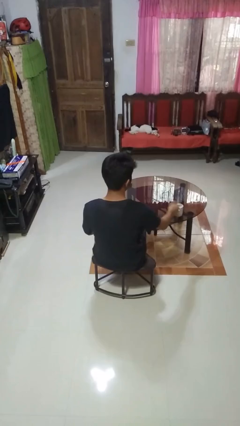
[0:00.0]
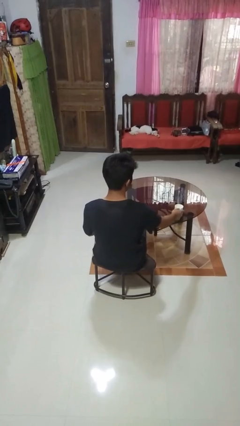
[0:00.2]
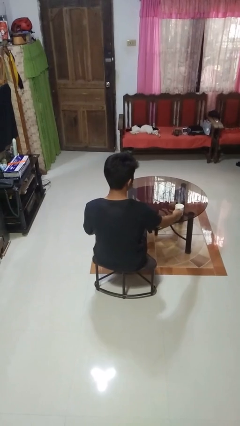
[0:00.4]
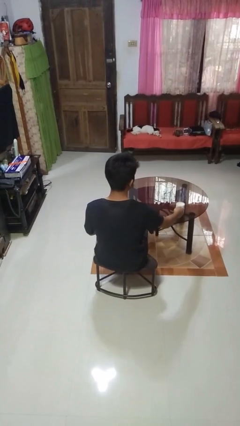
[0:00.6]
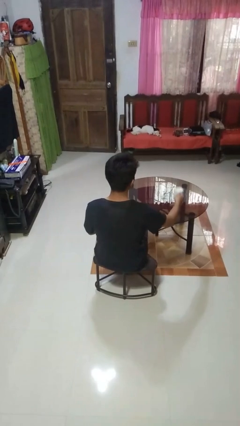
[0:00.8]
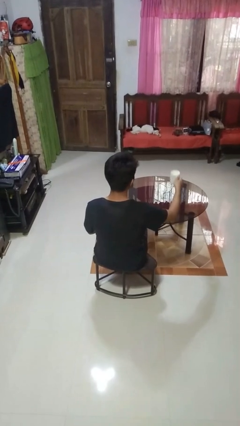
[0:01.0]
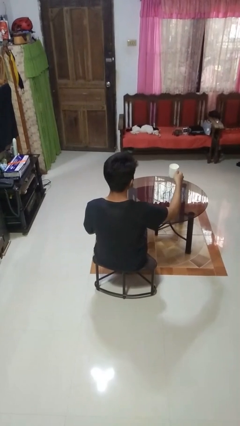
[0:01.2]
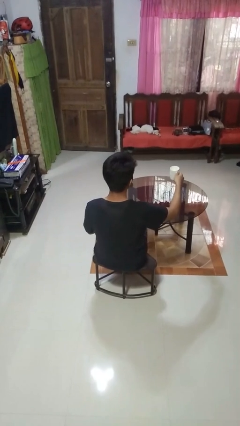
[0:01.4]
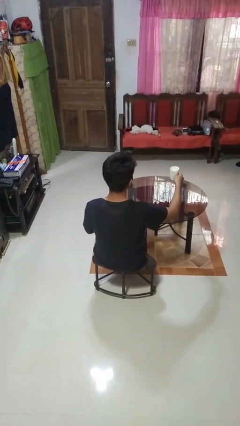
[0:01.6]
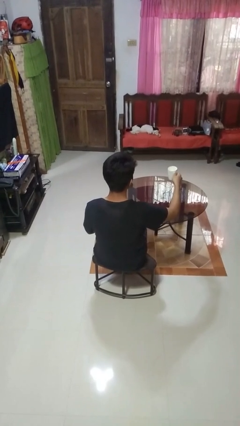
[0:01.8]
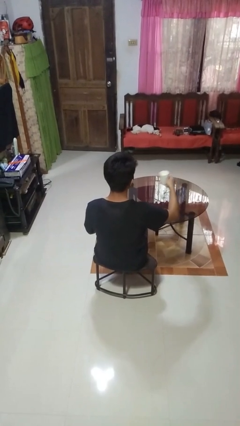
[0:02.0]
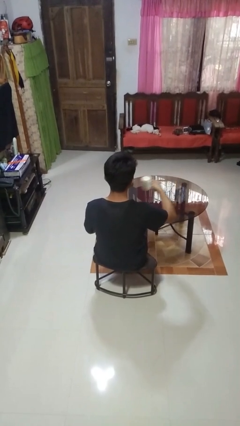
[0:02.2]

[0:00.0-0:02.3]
person picks up object from table

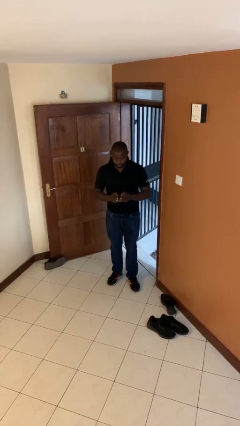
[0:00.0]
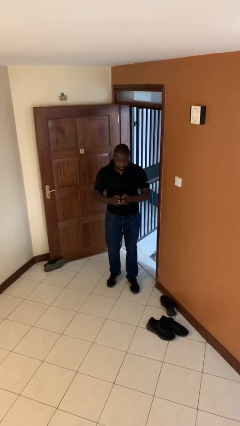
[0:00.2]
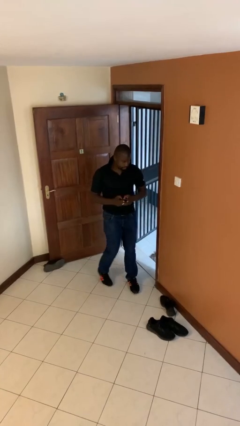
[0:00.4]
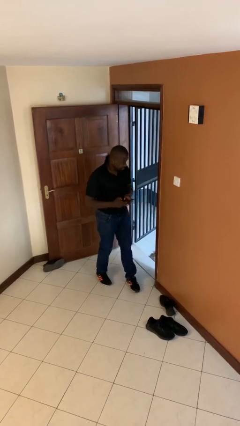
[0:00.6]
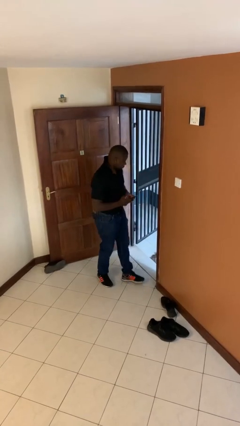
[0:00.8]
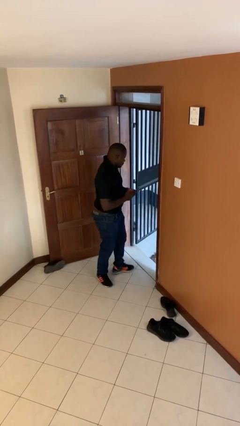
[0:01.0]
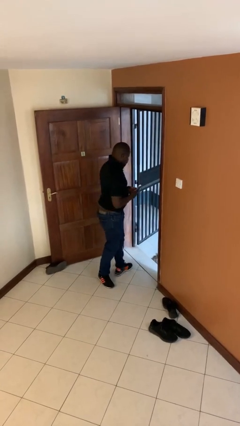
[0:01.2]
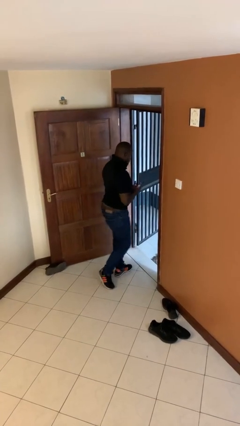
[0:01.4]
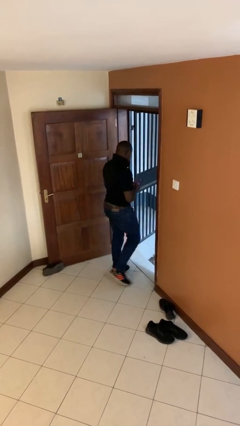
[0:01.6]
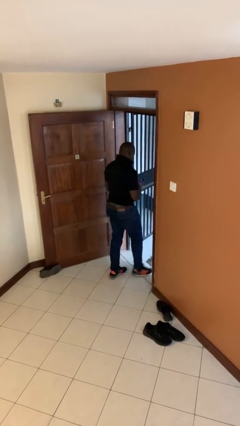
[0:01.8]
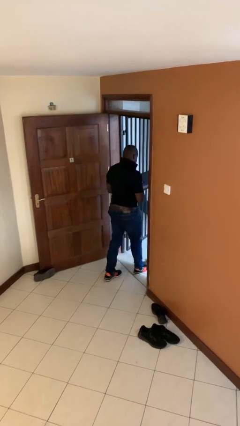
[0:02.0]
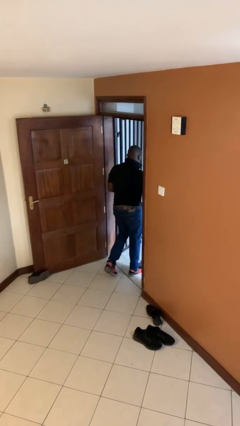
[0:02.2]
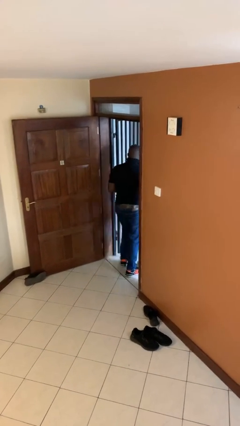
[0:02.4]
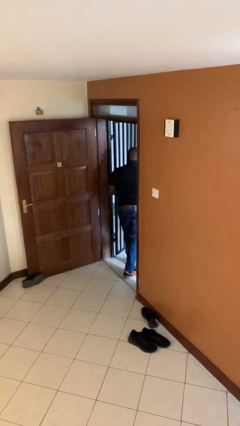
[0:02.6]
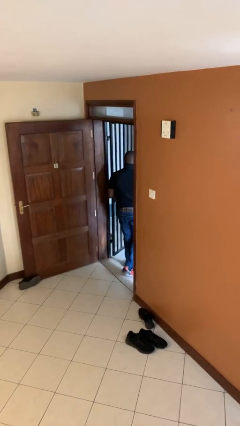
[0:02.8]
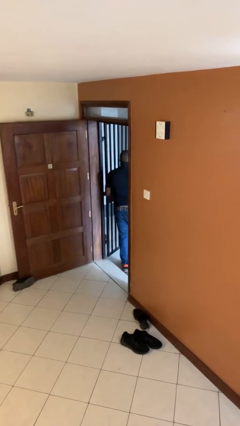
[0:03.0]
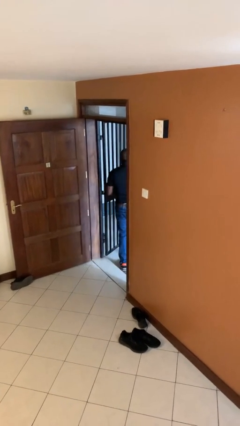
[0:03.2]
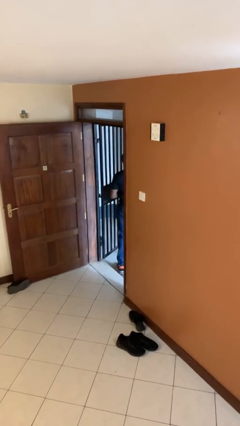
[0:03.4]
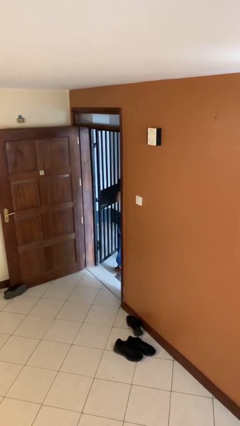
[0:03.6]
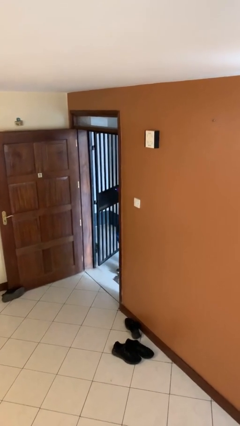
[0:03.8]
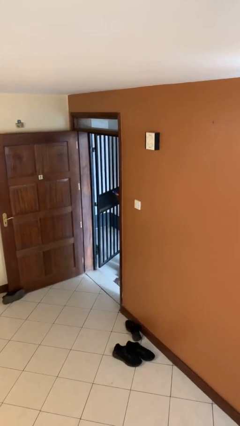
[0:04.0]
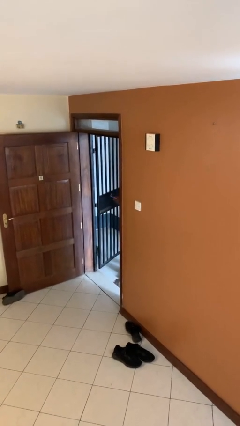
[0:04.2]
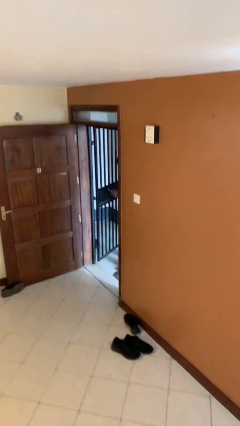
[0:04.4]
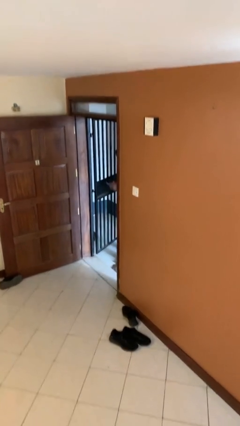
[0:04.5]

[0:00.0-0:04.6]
person exits scene through structure

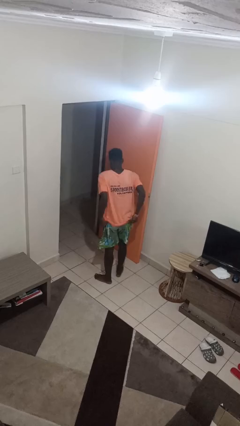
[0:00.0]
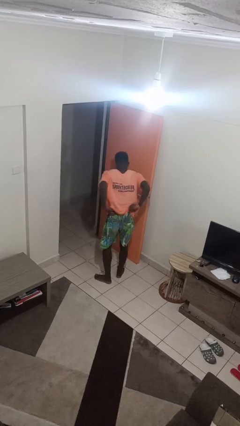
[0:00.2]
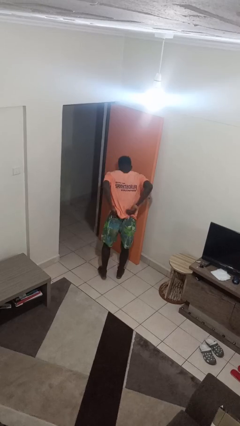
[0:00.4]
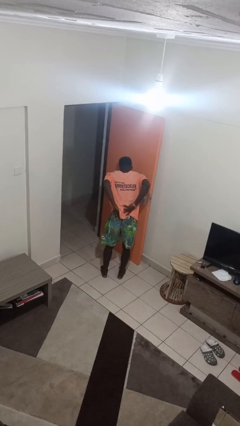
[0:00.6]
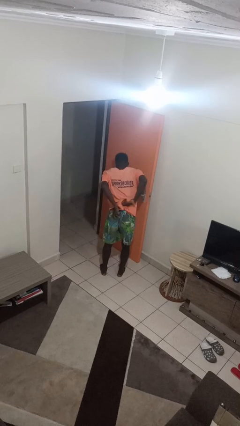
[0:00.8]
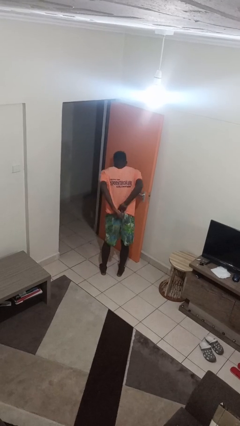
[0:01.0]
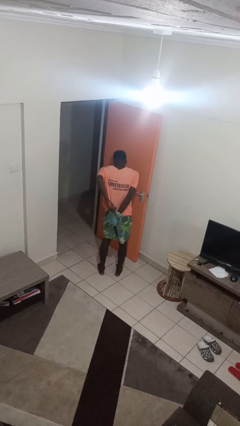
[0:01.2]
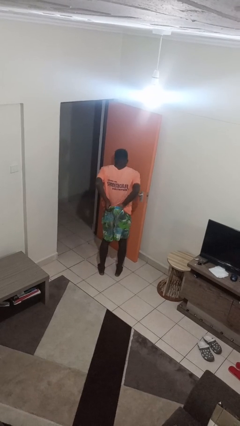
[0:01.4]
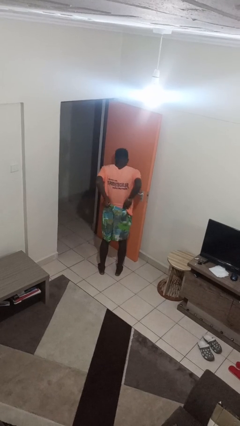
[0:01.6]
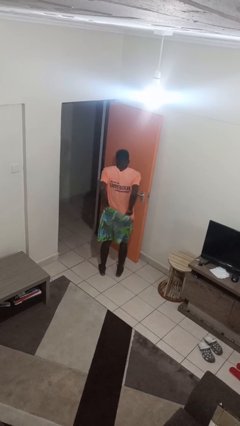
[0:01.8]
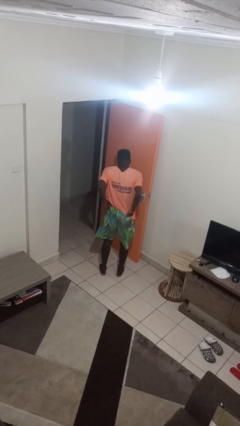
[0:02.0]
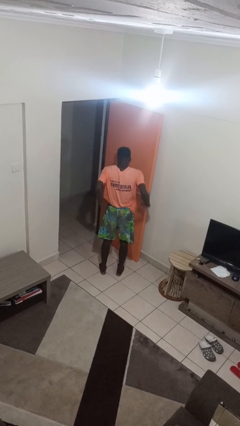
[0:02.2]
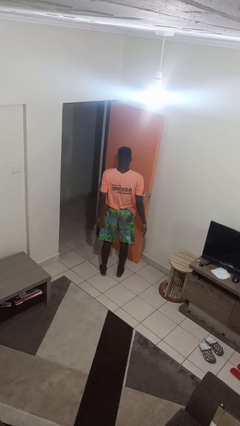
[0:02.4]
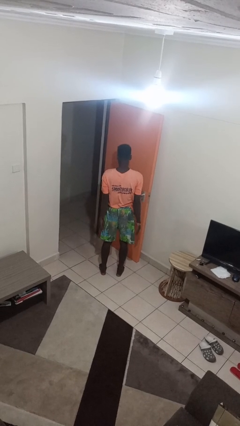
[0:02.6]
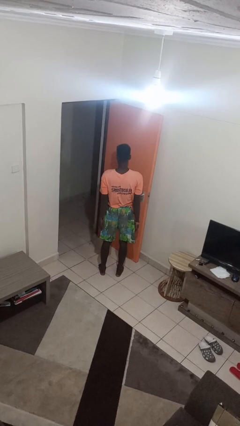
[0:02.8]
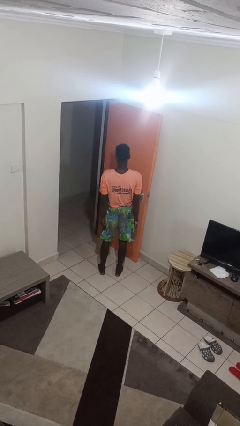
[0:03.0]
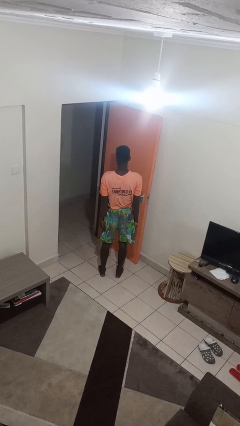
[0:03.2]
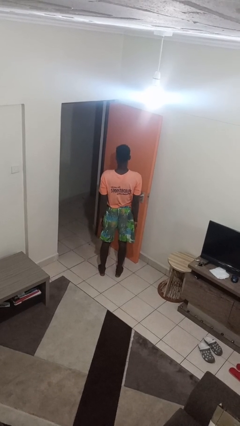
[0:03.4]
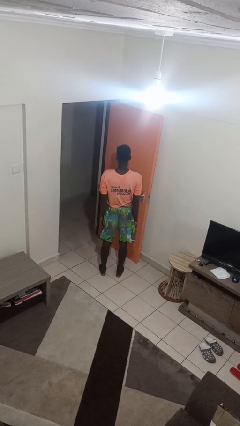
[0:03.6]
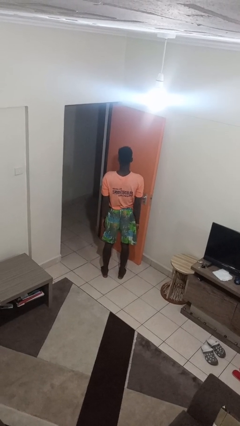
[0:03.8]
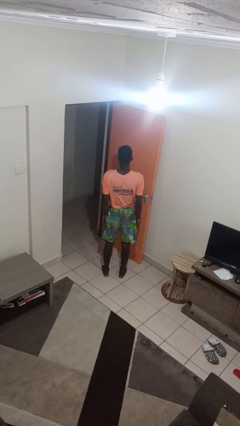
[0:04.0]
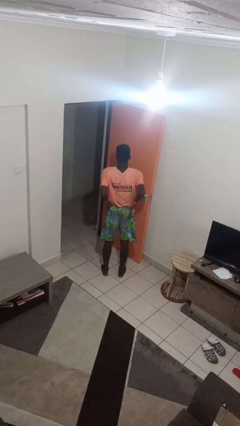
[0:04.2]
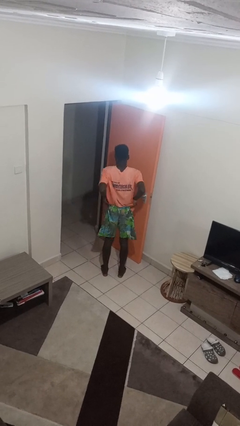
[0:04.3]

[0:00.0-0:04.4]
person tucks in shirt

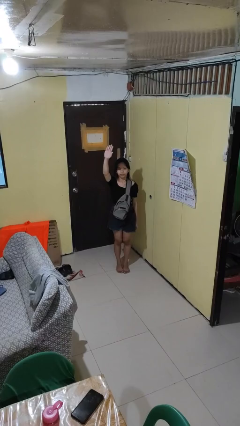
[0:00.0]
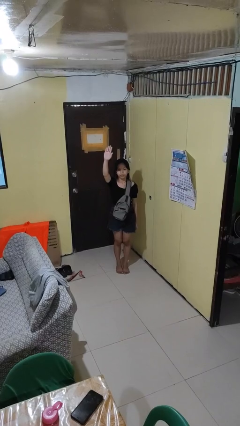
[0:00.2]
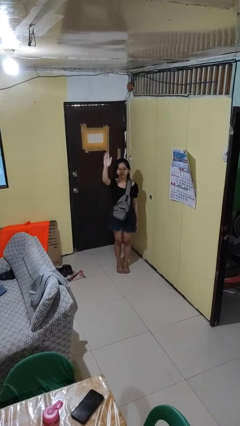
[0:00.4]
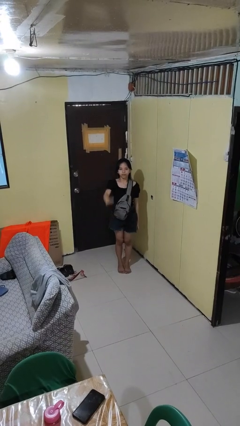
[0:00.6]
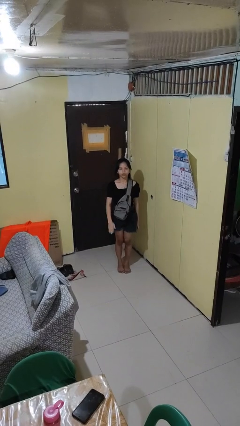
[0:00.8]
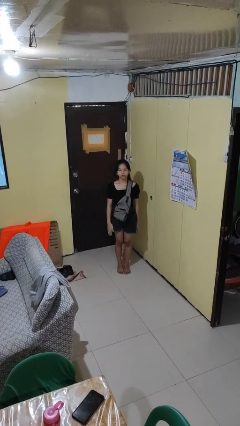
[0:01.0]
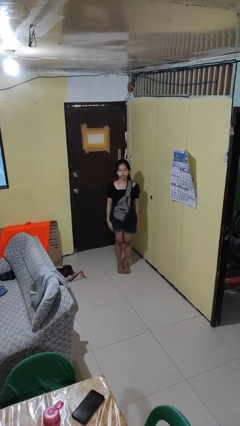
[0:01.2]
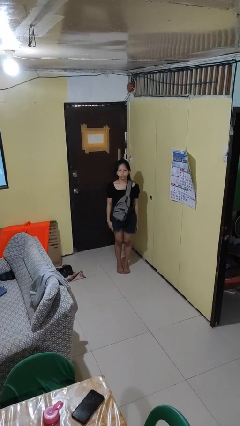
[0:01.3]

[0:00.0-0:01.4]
person gestures swipe down

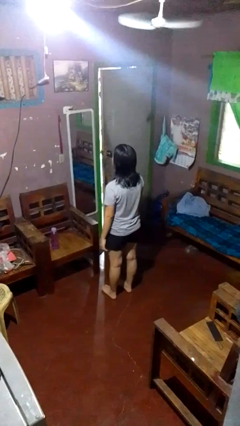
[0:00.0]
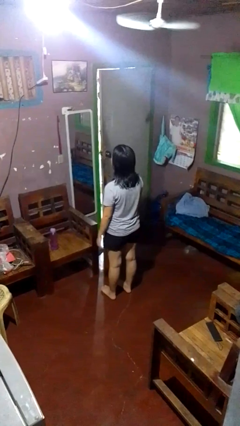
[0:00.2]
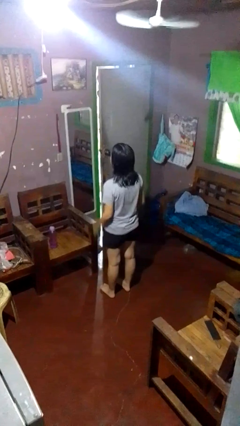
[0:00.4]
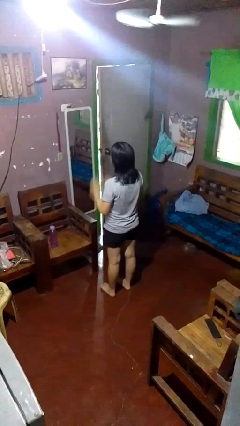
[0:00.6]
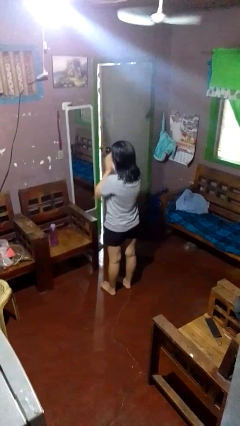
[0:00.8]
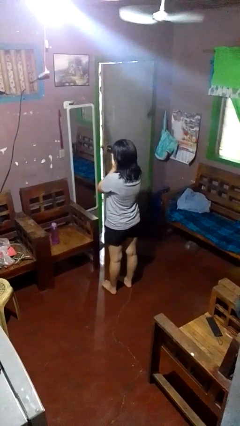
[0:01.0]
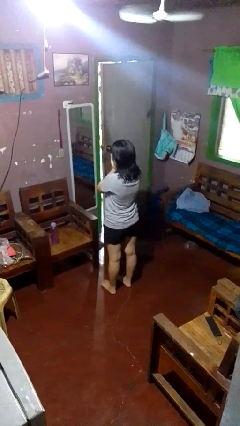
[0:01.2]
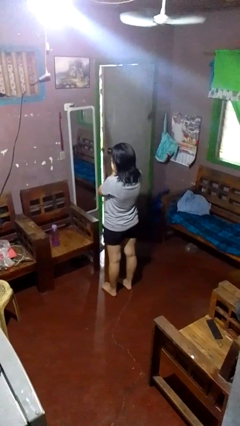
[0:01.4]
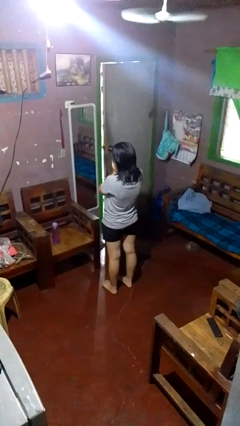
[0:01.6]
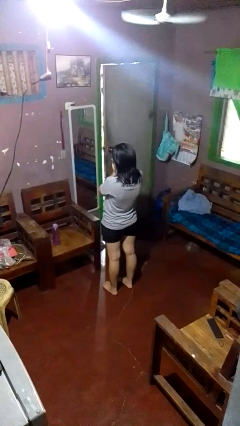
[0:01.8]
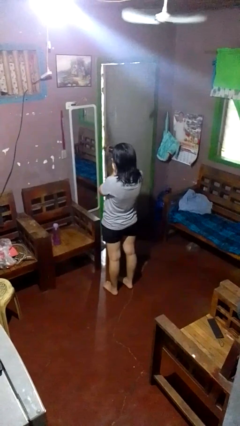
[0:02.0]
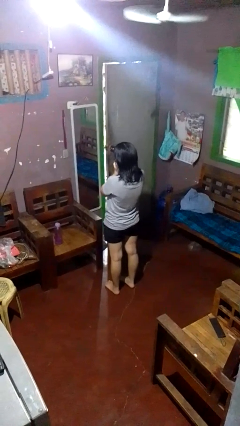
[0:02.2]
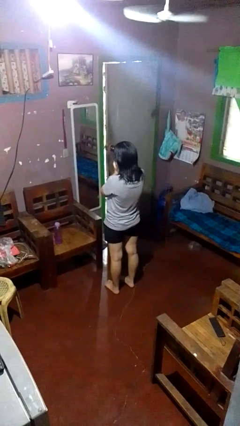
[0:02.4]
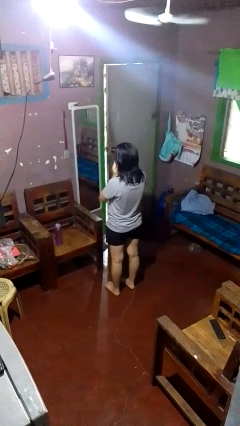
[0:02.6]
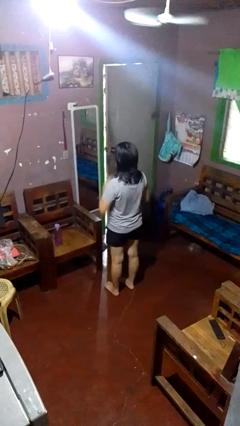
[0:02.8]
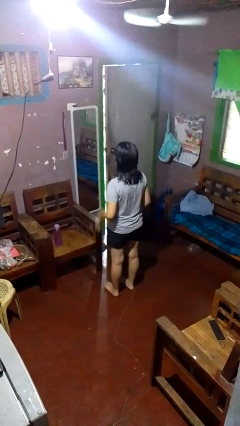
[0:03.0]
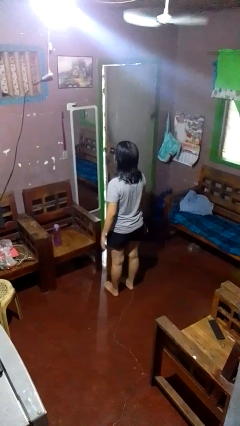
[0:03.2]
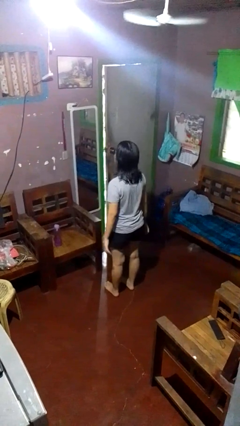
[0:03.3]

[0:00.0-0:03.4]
person covers face with hands

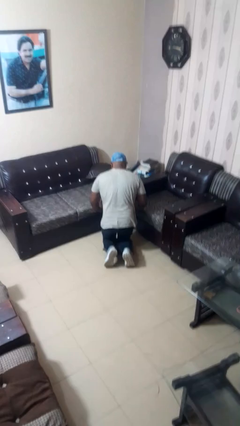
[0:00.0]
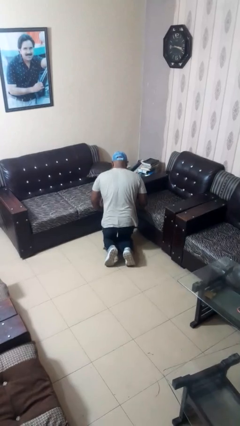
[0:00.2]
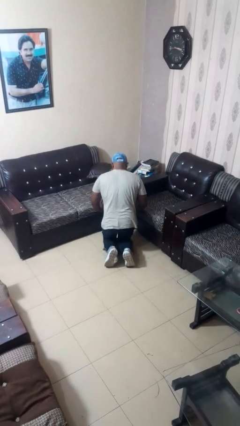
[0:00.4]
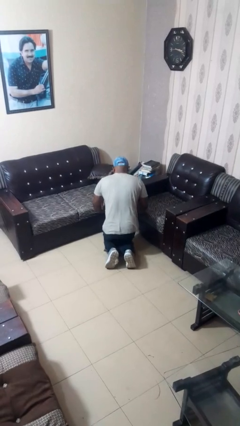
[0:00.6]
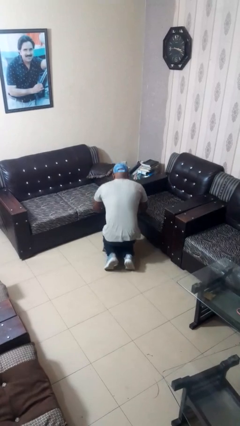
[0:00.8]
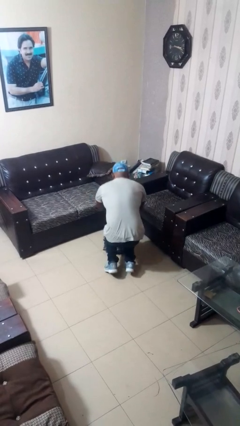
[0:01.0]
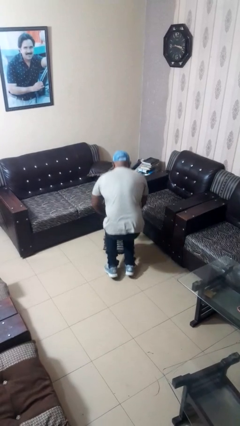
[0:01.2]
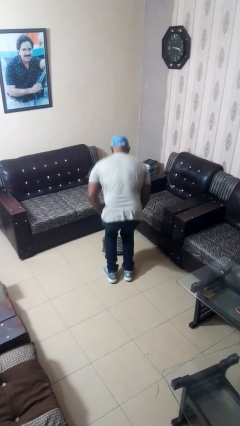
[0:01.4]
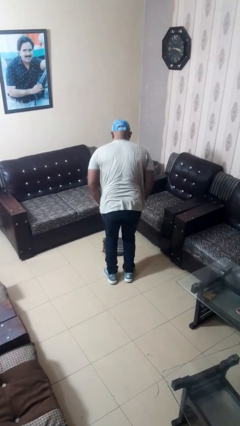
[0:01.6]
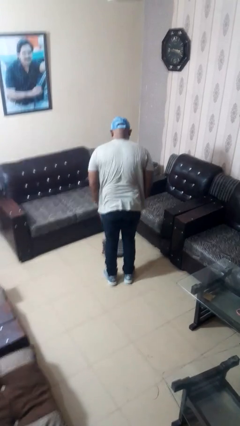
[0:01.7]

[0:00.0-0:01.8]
person stands up from floor
